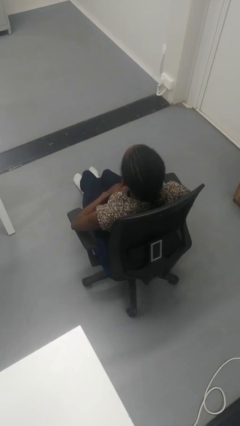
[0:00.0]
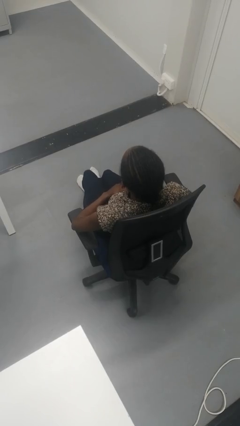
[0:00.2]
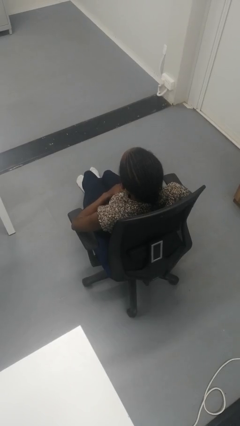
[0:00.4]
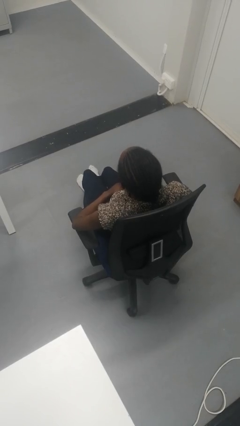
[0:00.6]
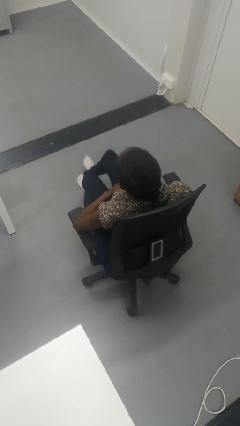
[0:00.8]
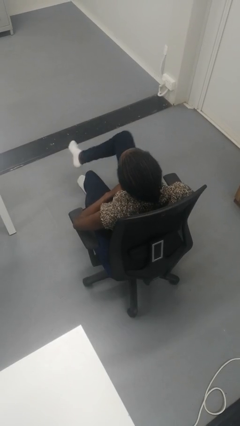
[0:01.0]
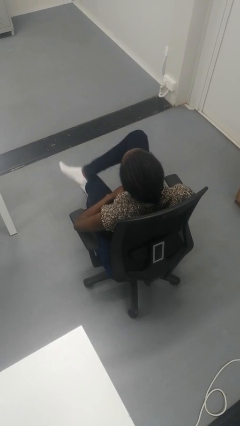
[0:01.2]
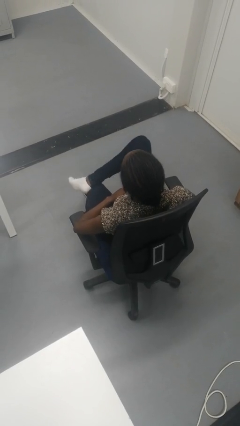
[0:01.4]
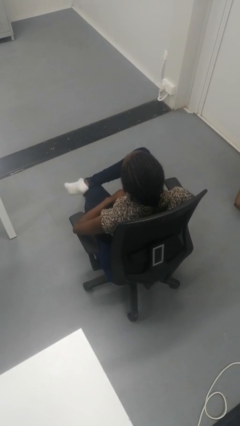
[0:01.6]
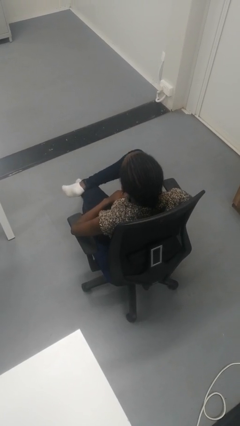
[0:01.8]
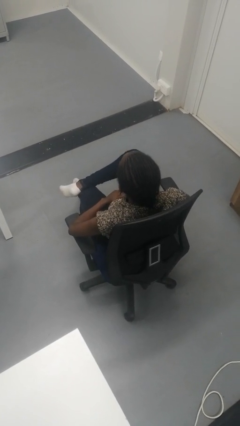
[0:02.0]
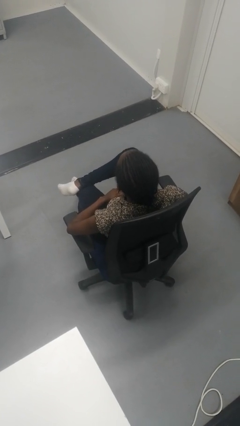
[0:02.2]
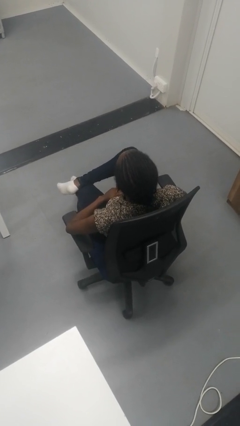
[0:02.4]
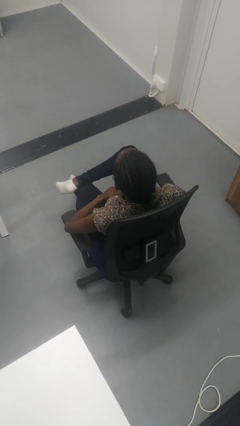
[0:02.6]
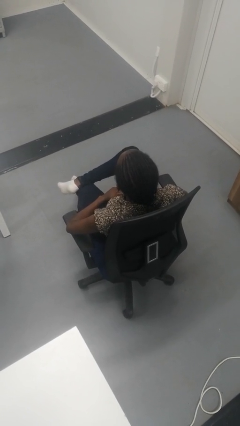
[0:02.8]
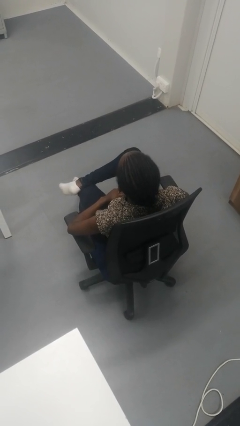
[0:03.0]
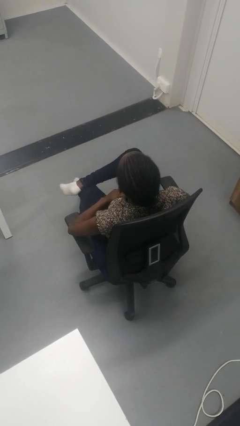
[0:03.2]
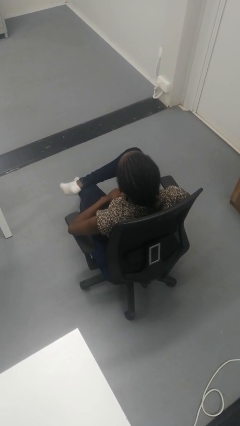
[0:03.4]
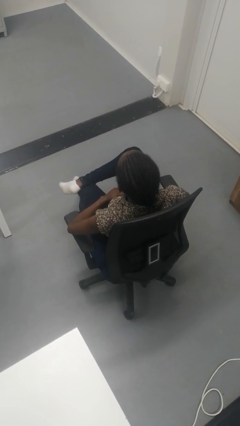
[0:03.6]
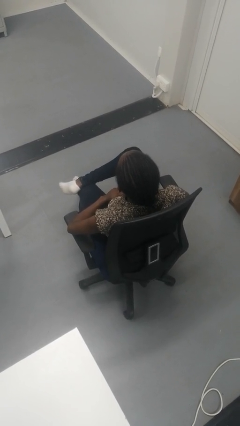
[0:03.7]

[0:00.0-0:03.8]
person crosses legs

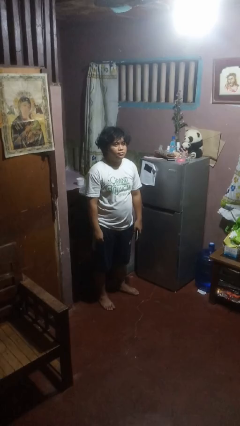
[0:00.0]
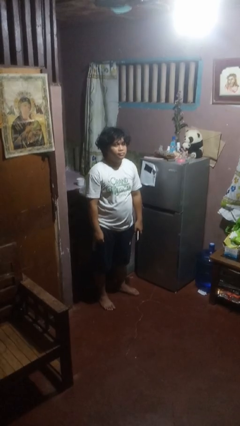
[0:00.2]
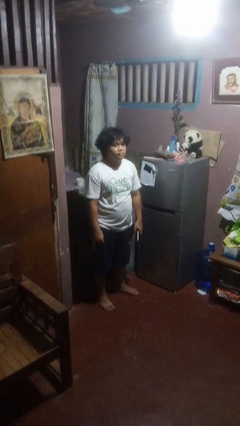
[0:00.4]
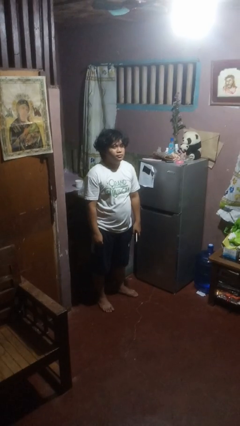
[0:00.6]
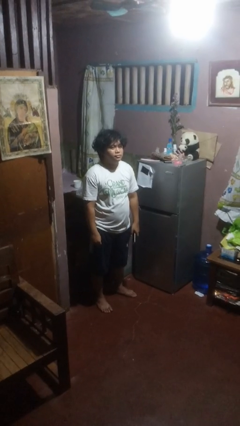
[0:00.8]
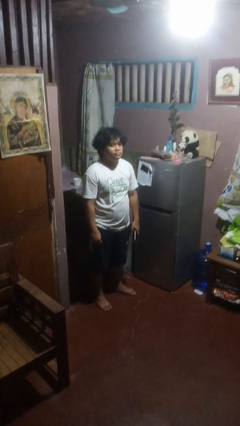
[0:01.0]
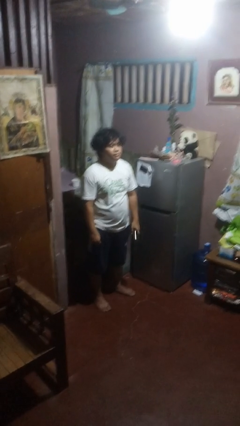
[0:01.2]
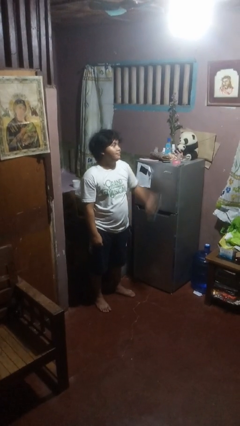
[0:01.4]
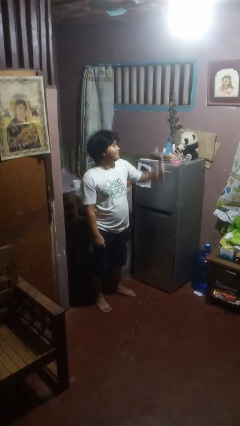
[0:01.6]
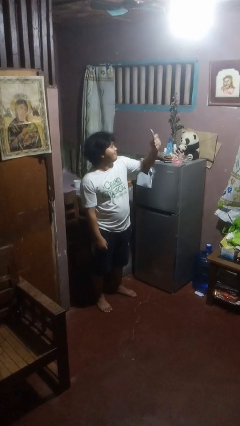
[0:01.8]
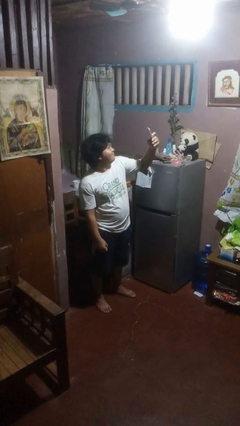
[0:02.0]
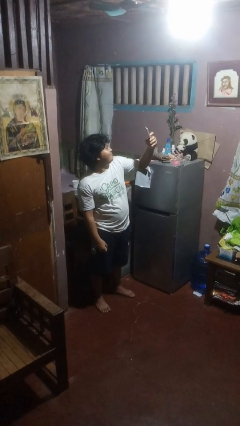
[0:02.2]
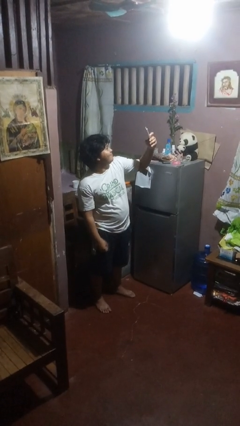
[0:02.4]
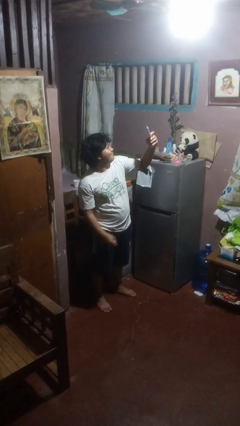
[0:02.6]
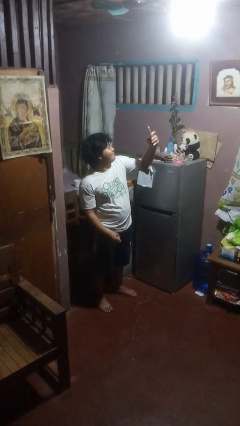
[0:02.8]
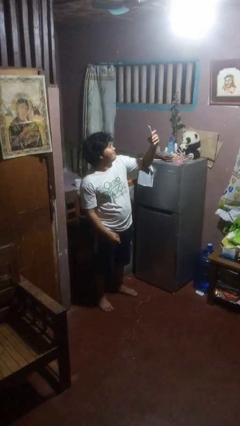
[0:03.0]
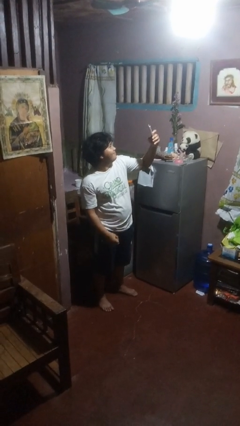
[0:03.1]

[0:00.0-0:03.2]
person takes selfie

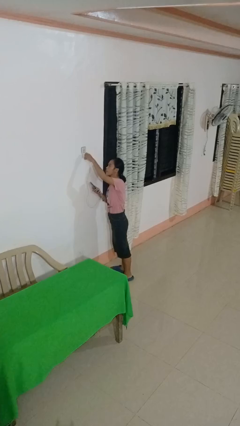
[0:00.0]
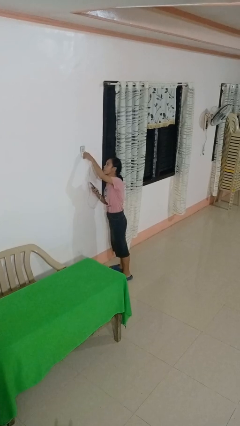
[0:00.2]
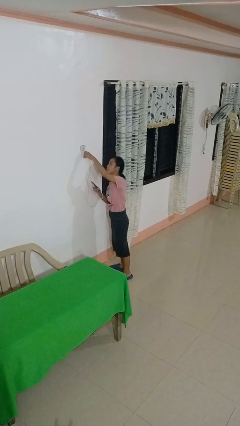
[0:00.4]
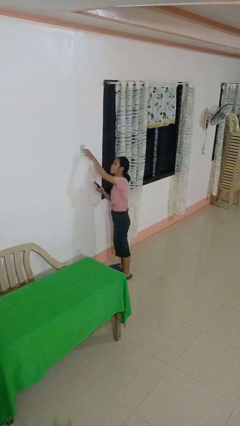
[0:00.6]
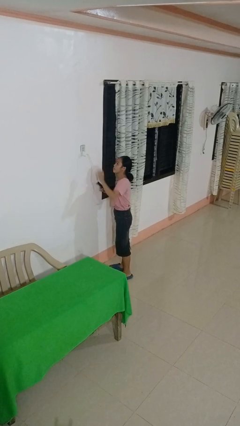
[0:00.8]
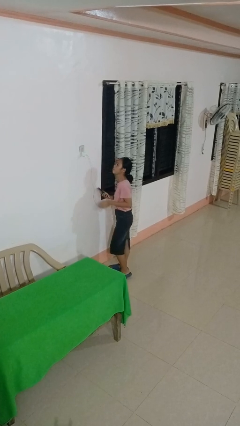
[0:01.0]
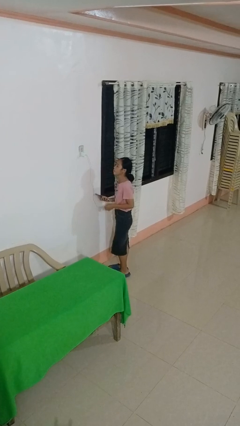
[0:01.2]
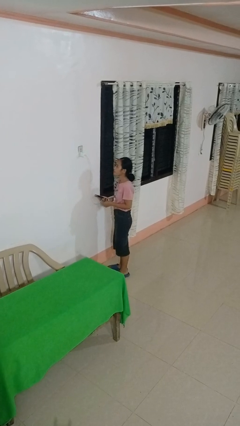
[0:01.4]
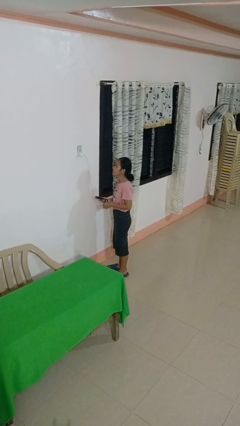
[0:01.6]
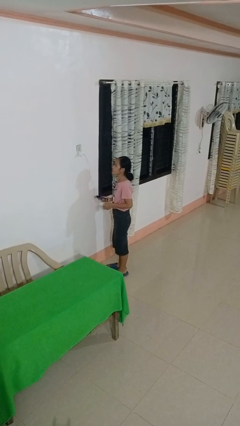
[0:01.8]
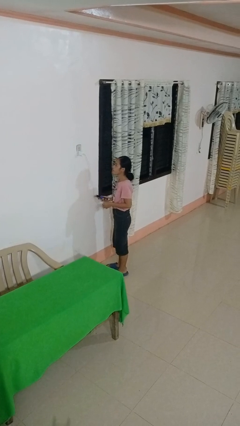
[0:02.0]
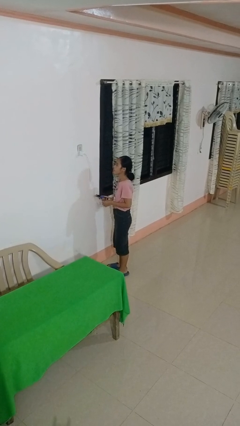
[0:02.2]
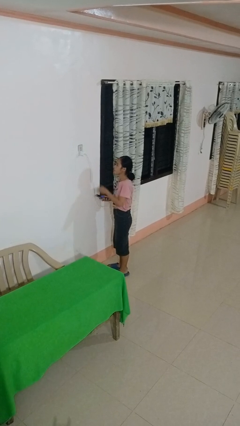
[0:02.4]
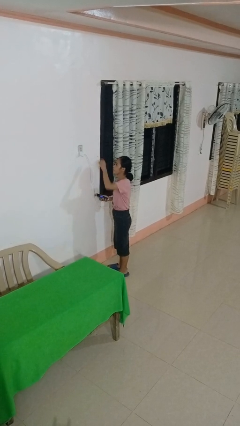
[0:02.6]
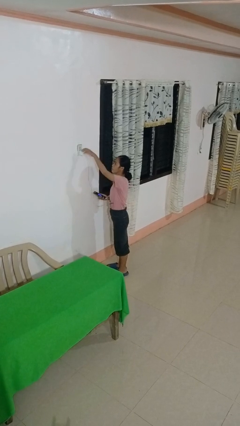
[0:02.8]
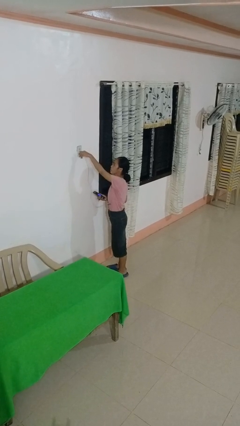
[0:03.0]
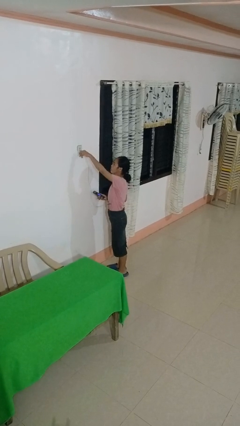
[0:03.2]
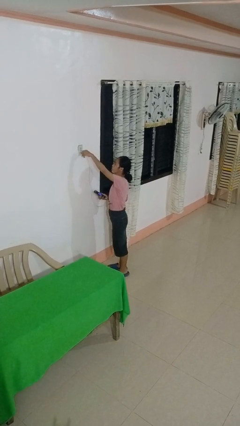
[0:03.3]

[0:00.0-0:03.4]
person plugs into electrical socket

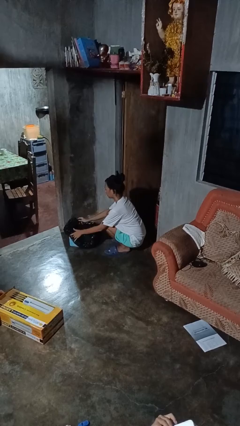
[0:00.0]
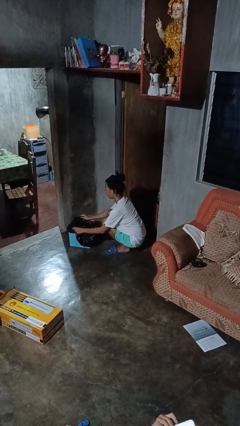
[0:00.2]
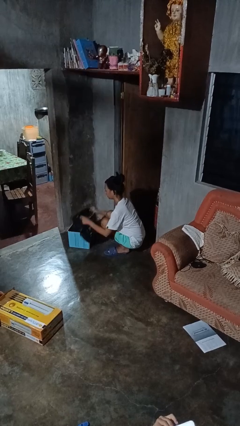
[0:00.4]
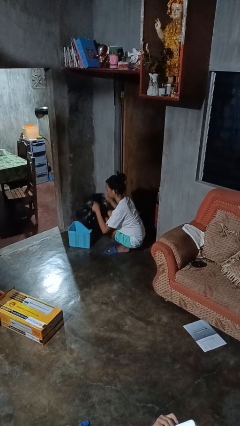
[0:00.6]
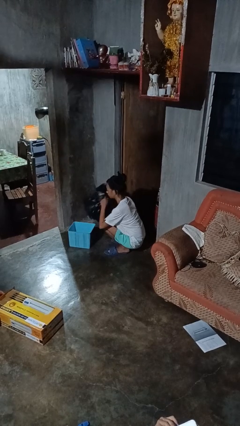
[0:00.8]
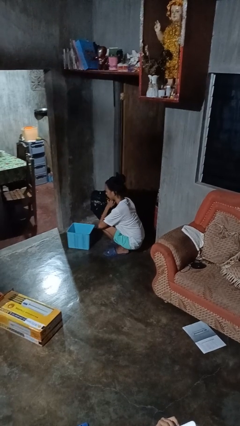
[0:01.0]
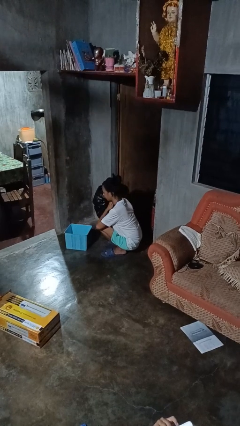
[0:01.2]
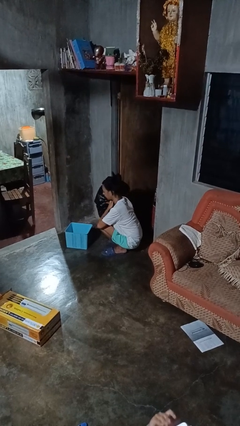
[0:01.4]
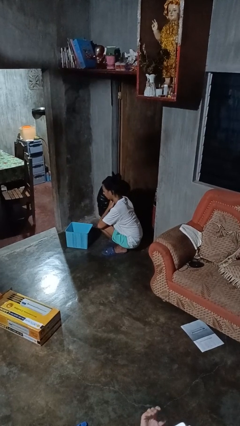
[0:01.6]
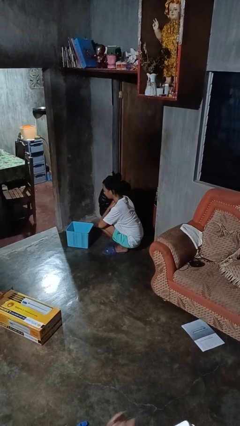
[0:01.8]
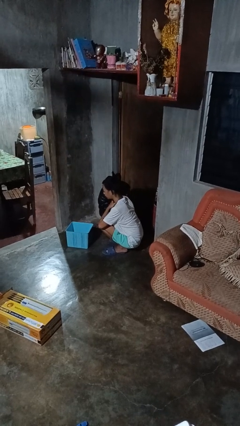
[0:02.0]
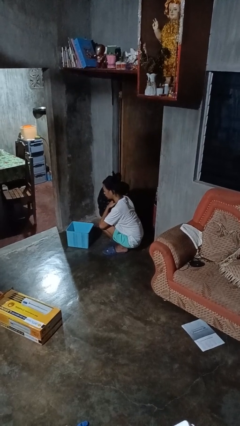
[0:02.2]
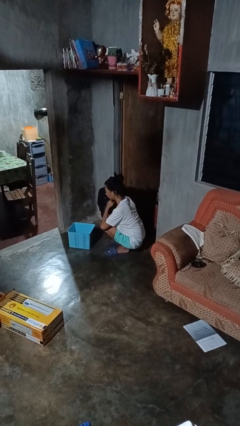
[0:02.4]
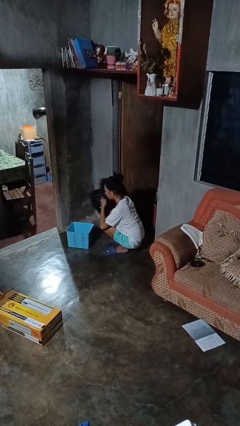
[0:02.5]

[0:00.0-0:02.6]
person removes trashbag from trashcan

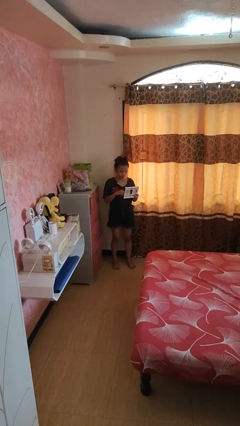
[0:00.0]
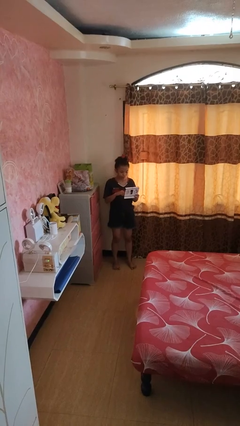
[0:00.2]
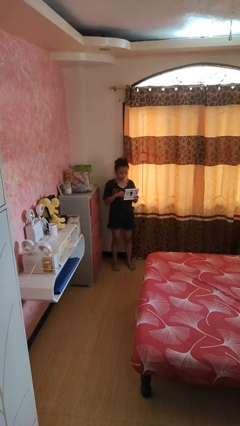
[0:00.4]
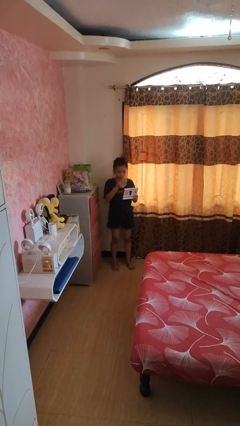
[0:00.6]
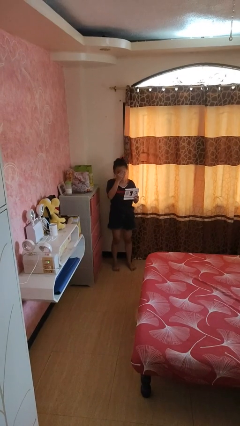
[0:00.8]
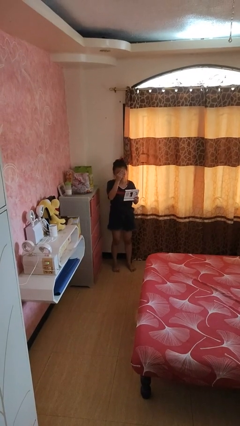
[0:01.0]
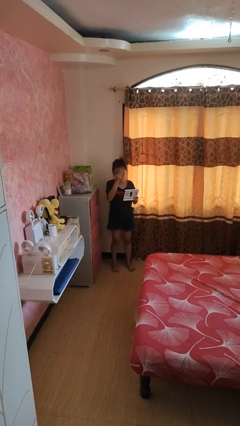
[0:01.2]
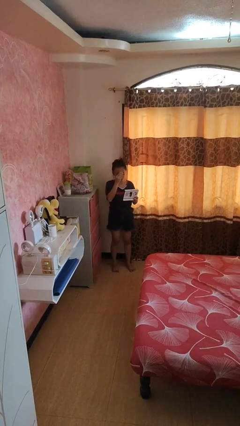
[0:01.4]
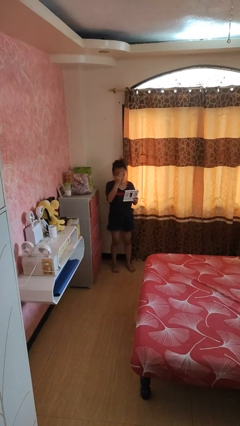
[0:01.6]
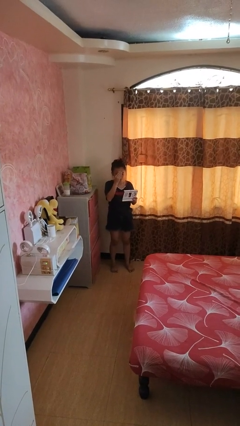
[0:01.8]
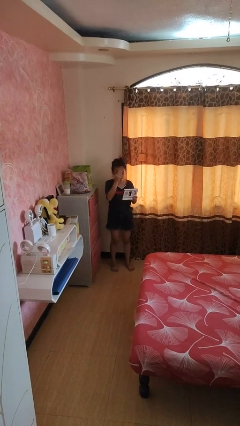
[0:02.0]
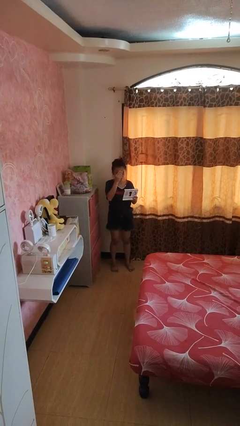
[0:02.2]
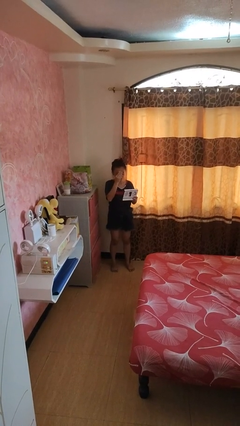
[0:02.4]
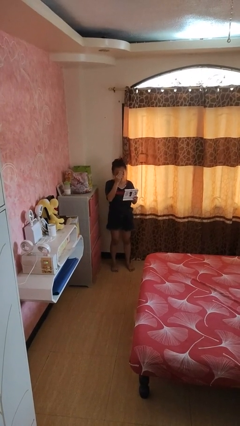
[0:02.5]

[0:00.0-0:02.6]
person applies foundation makeup

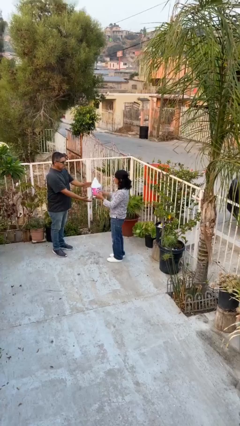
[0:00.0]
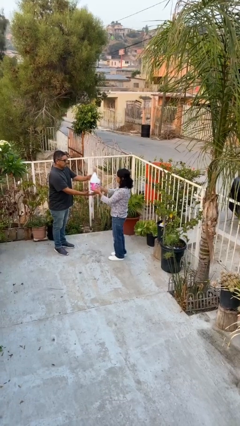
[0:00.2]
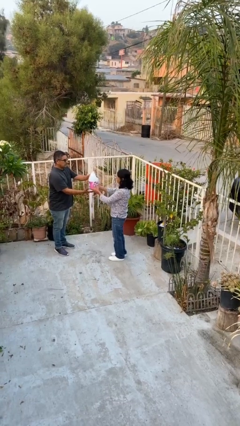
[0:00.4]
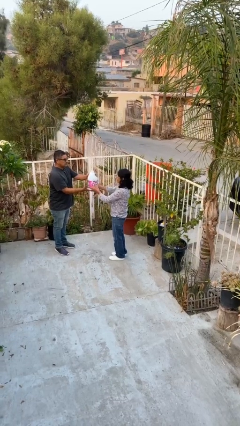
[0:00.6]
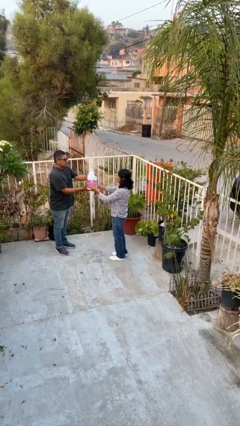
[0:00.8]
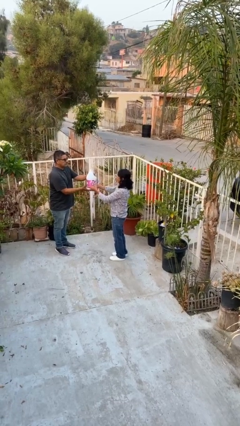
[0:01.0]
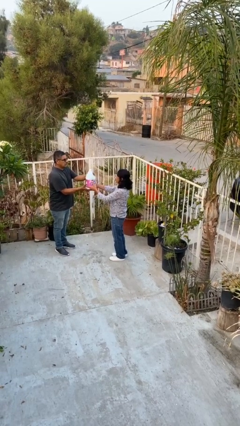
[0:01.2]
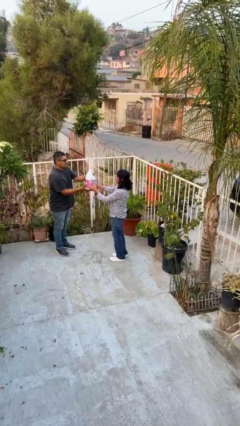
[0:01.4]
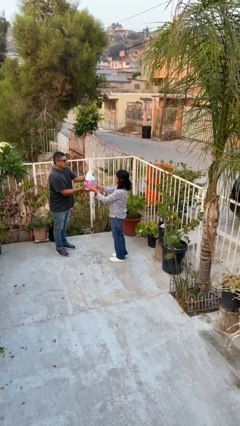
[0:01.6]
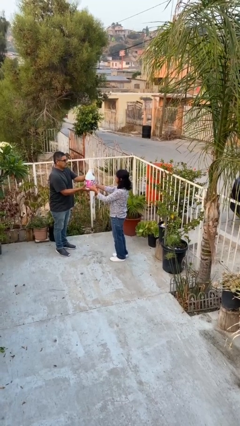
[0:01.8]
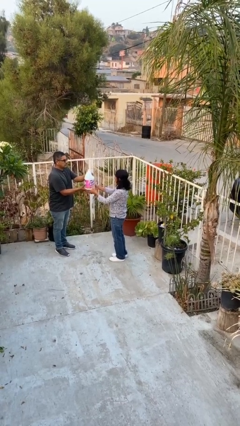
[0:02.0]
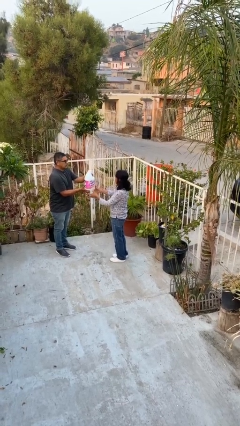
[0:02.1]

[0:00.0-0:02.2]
person transfers object to person
